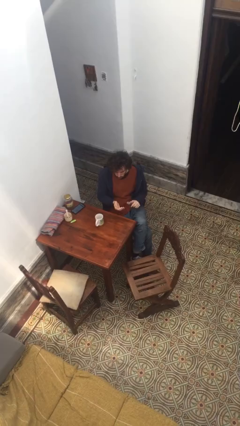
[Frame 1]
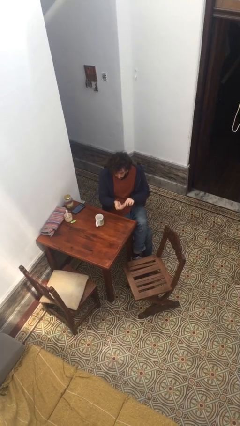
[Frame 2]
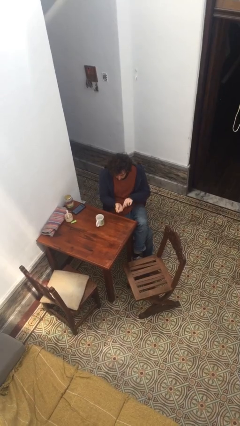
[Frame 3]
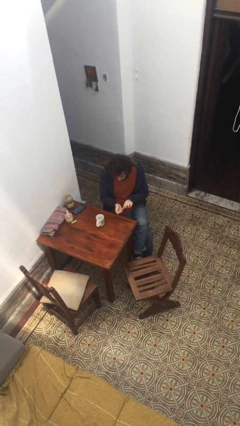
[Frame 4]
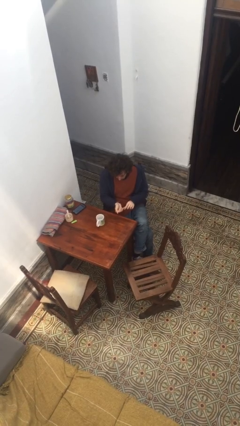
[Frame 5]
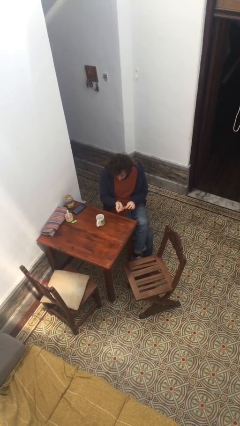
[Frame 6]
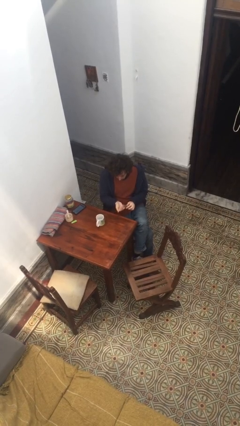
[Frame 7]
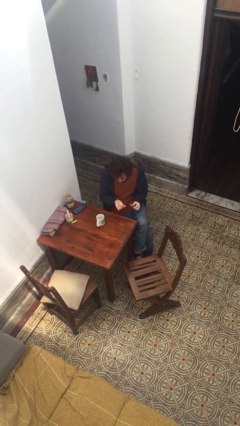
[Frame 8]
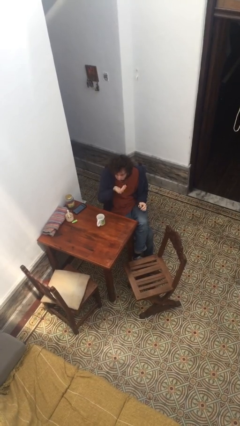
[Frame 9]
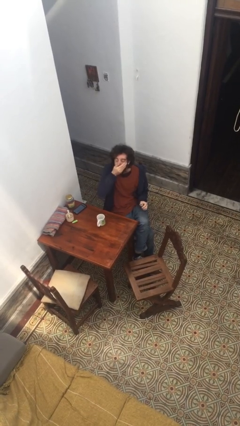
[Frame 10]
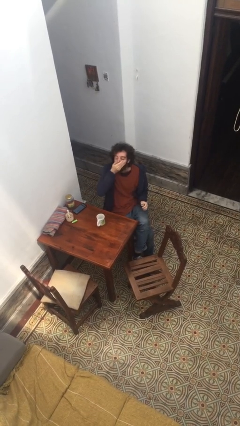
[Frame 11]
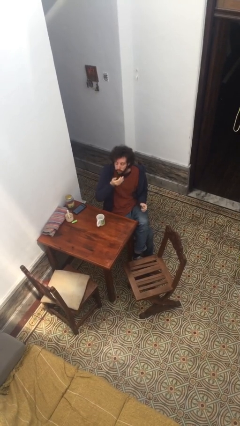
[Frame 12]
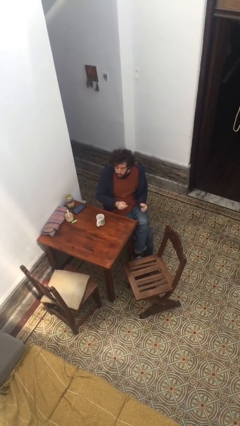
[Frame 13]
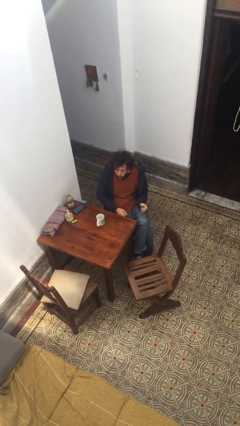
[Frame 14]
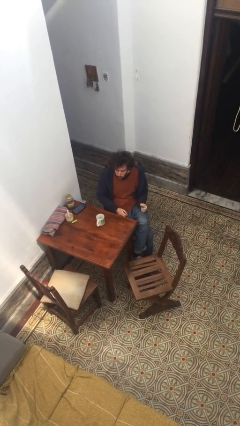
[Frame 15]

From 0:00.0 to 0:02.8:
person takes medicine pills

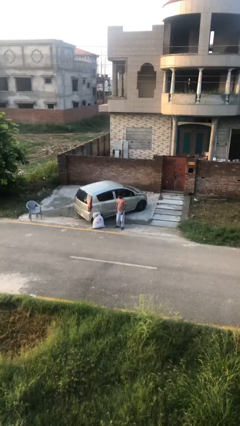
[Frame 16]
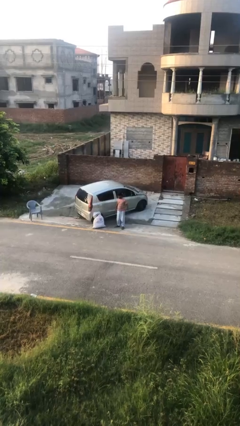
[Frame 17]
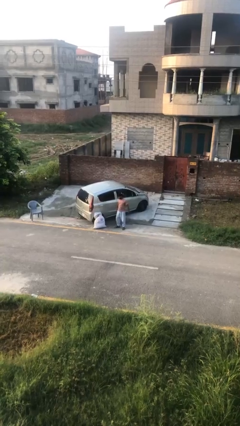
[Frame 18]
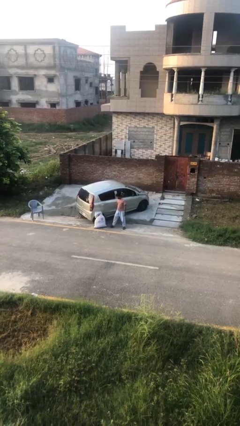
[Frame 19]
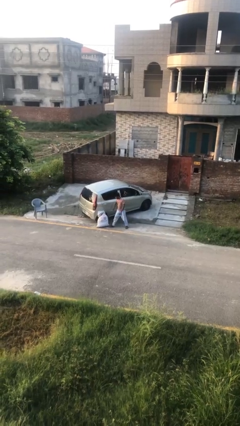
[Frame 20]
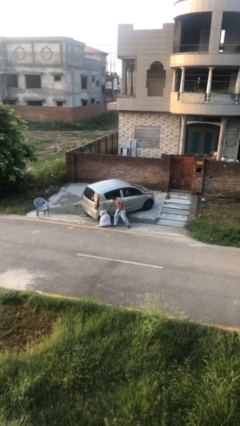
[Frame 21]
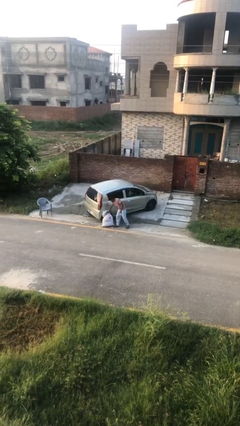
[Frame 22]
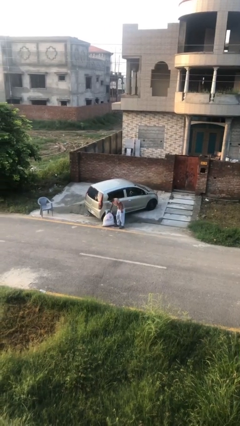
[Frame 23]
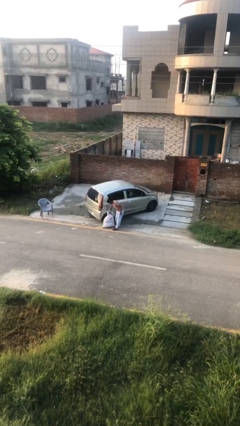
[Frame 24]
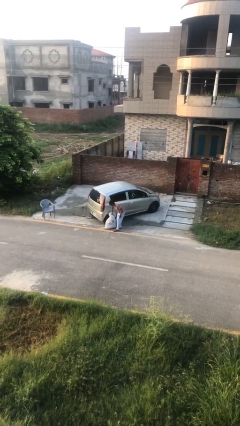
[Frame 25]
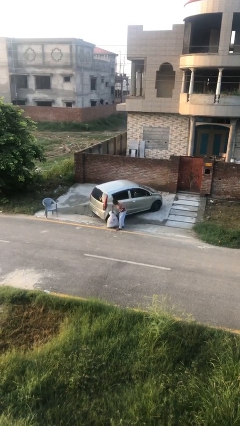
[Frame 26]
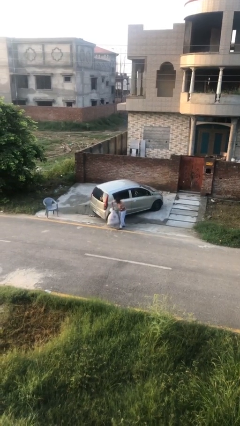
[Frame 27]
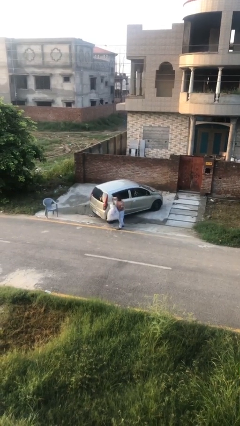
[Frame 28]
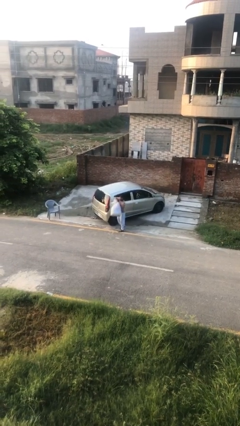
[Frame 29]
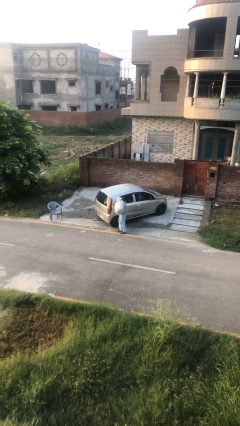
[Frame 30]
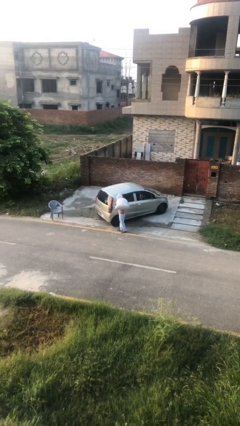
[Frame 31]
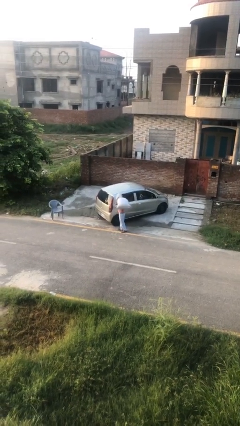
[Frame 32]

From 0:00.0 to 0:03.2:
person picks up object from floor

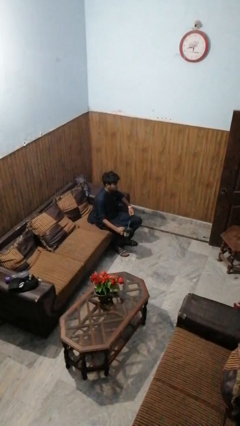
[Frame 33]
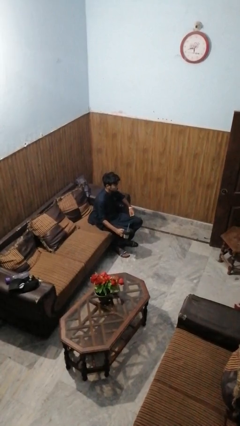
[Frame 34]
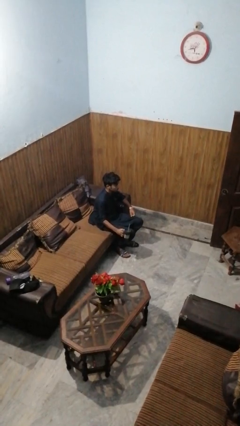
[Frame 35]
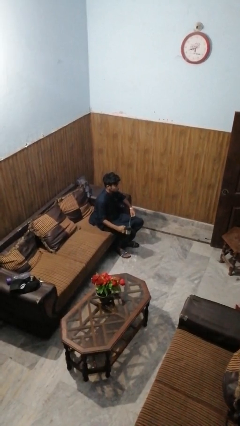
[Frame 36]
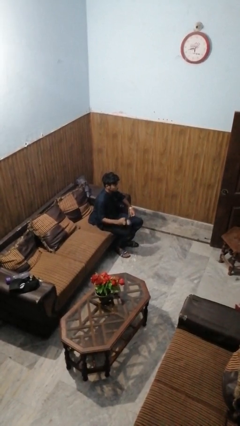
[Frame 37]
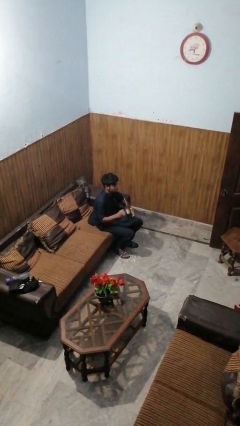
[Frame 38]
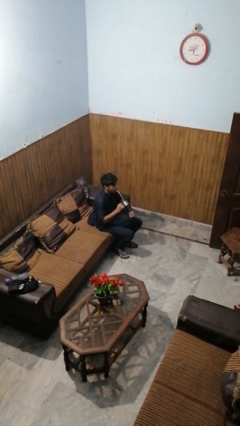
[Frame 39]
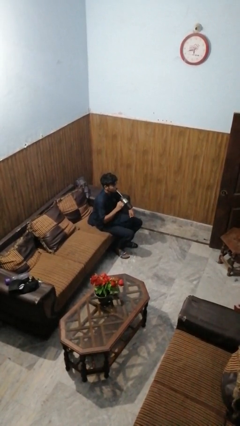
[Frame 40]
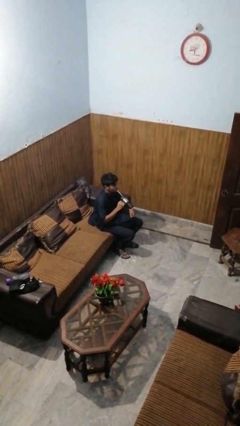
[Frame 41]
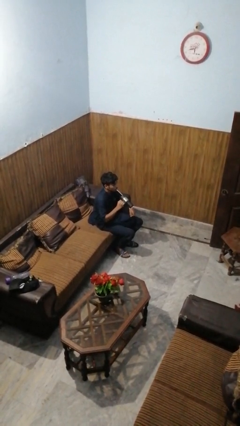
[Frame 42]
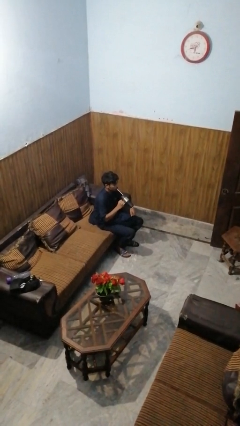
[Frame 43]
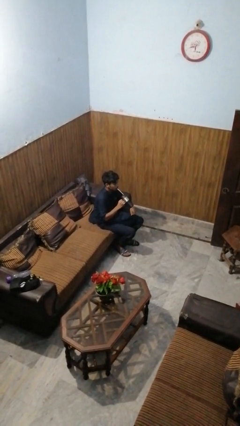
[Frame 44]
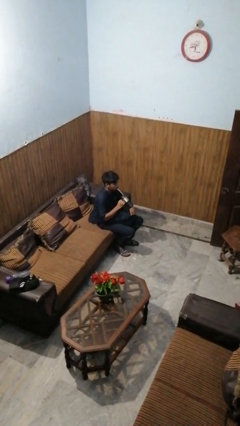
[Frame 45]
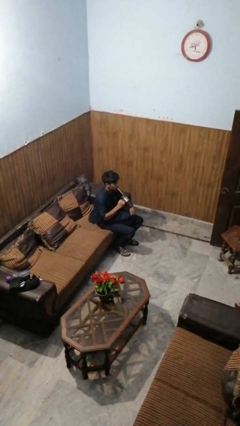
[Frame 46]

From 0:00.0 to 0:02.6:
person drinks from straw

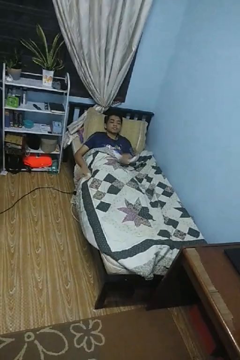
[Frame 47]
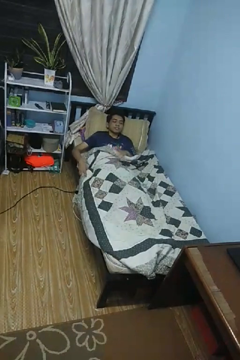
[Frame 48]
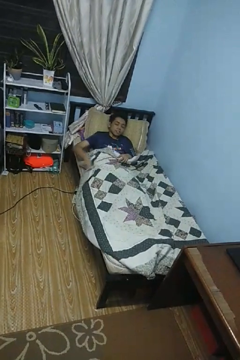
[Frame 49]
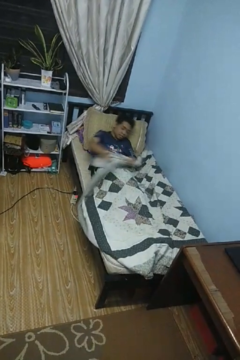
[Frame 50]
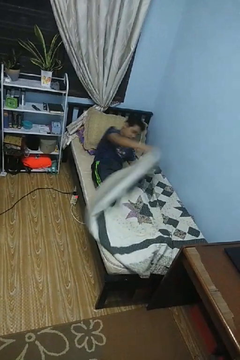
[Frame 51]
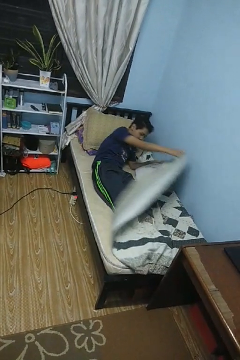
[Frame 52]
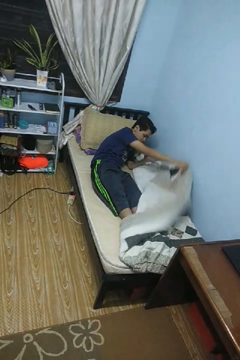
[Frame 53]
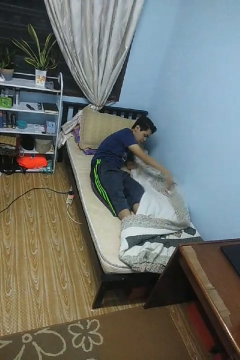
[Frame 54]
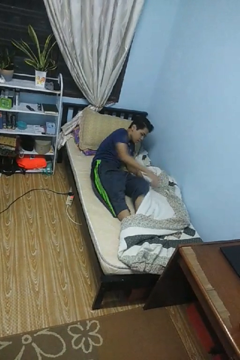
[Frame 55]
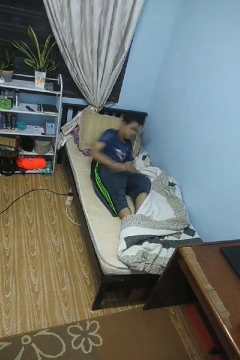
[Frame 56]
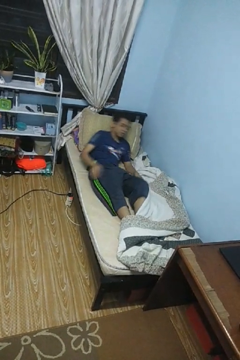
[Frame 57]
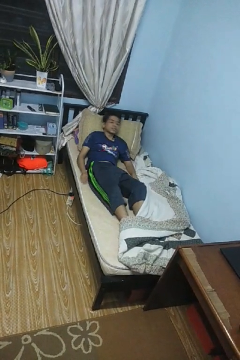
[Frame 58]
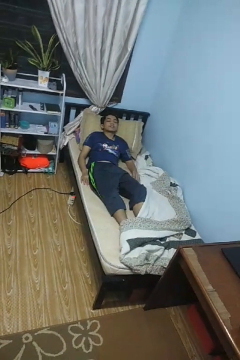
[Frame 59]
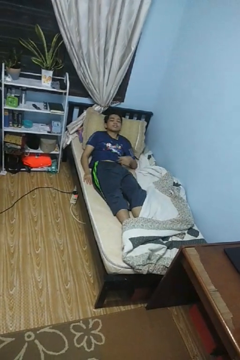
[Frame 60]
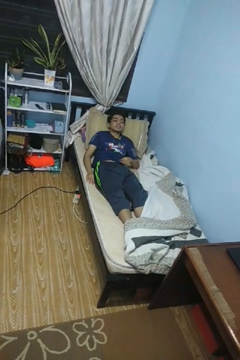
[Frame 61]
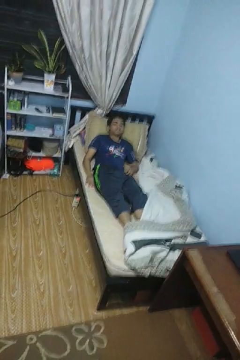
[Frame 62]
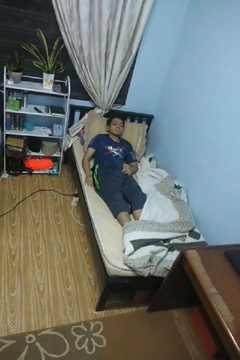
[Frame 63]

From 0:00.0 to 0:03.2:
person uncovers with bedsheets

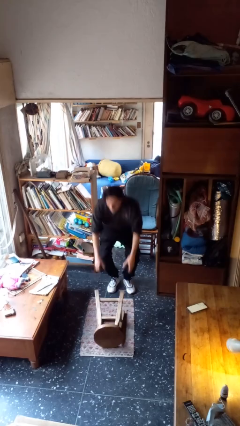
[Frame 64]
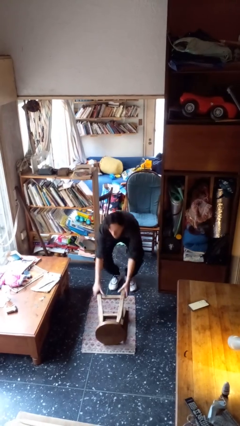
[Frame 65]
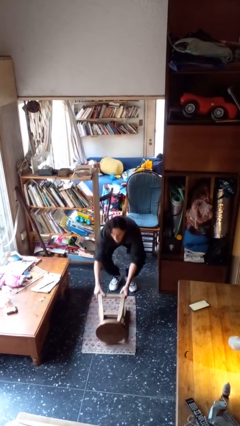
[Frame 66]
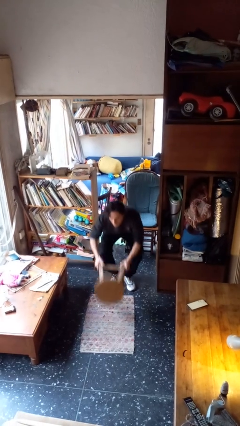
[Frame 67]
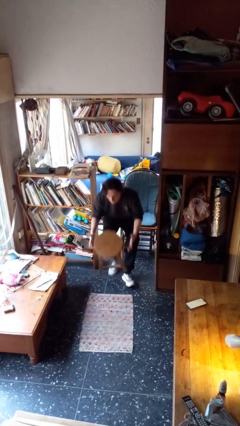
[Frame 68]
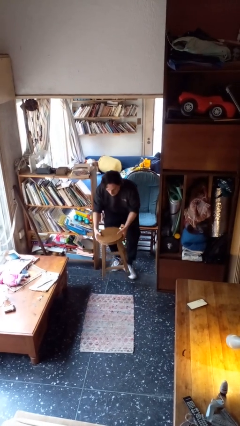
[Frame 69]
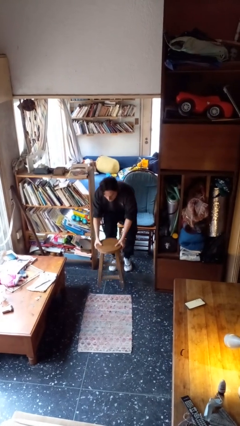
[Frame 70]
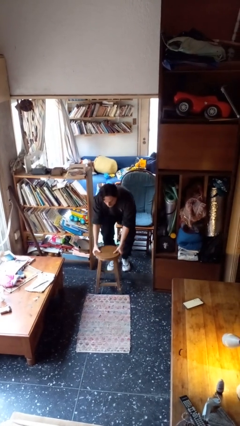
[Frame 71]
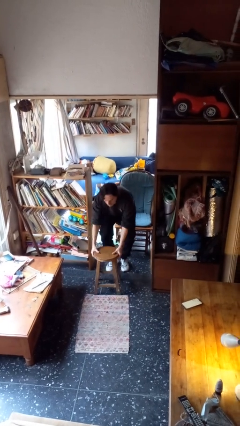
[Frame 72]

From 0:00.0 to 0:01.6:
person sets upright furniture

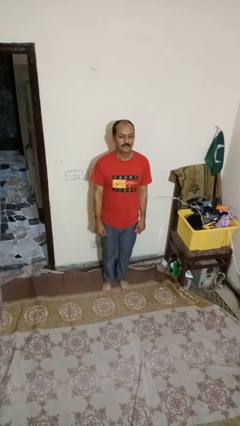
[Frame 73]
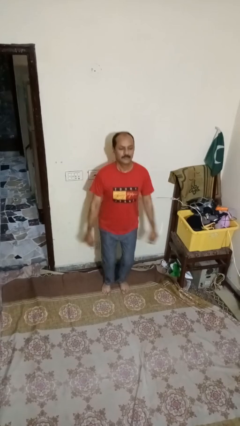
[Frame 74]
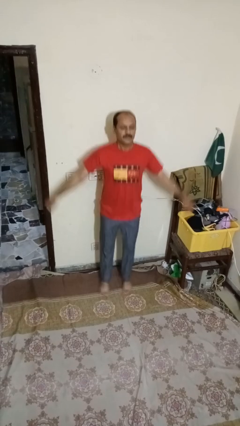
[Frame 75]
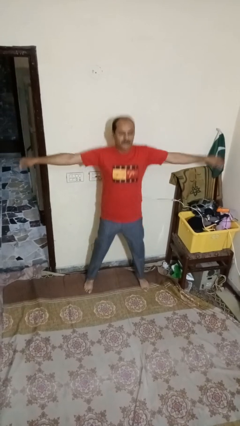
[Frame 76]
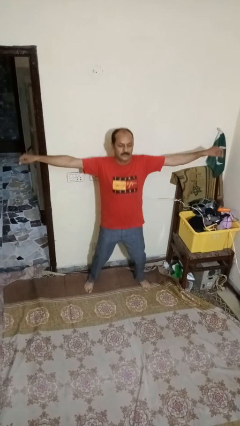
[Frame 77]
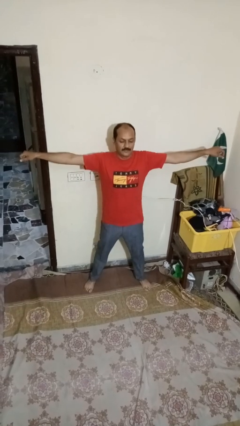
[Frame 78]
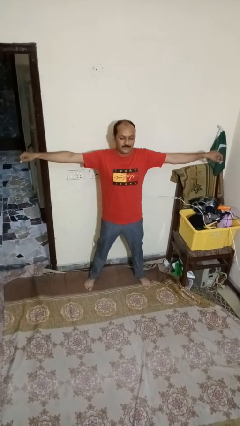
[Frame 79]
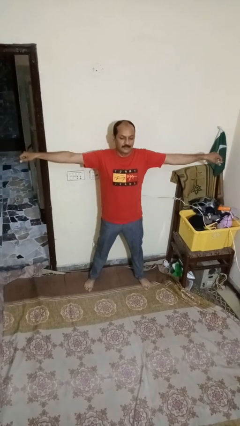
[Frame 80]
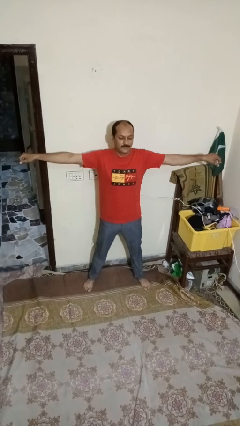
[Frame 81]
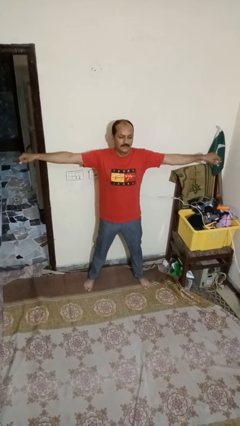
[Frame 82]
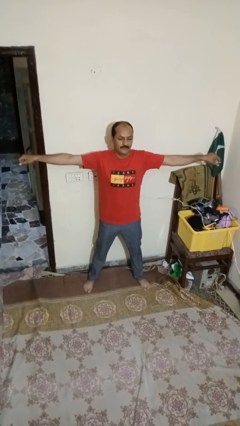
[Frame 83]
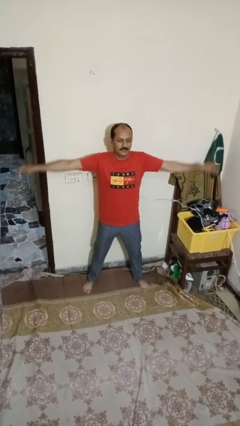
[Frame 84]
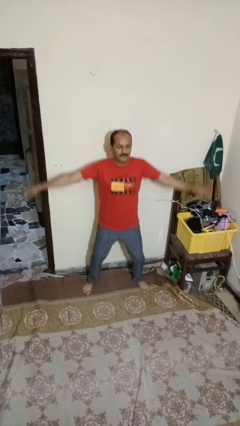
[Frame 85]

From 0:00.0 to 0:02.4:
person exercises with jumping jacks

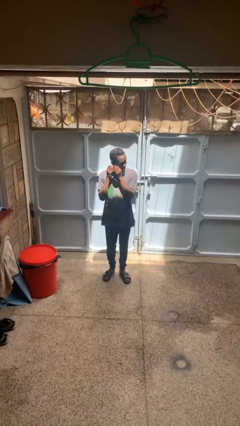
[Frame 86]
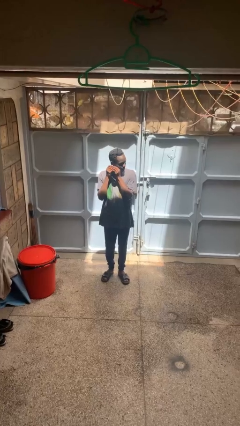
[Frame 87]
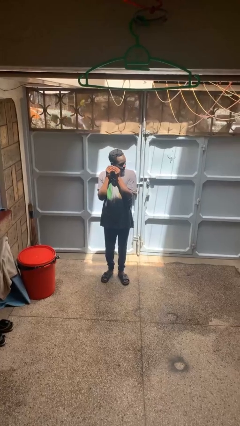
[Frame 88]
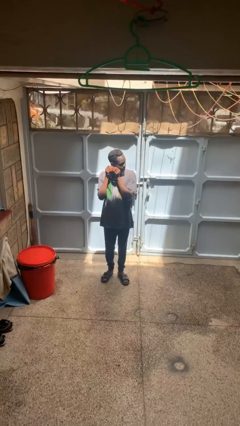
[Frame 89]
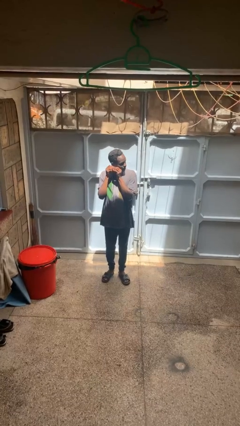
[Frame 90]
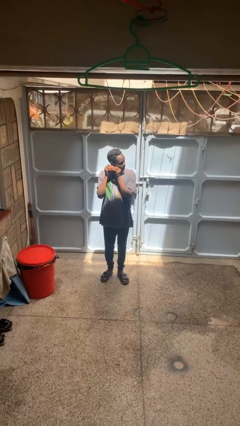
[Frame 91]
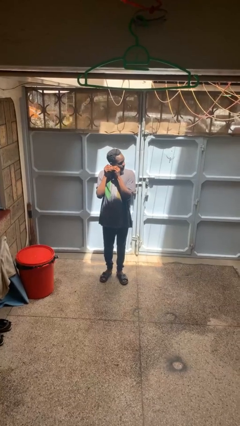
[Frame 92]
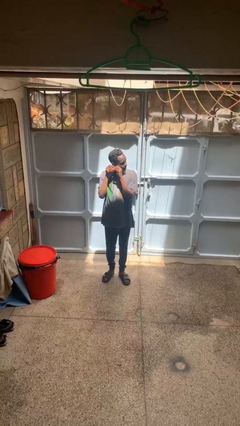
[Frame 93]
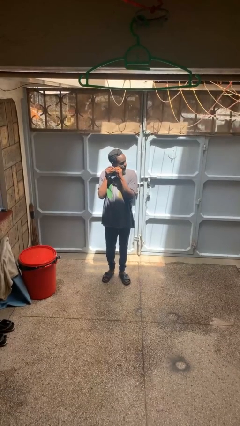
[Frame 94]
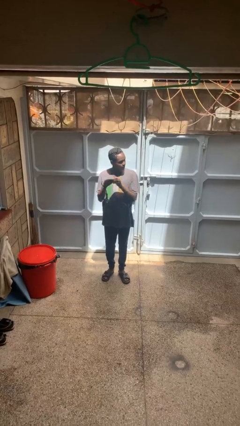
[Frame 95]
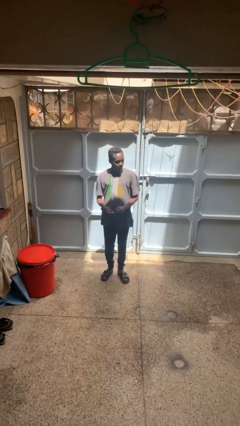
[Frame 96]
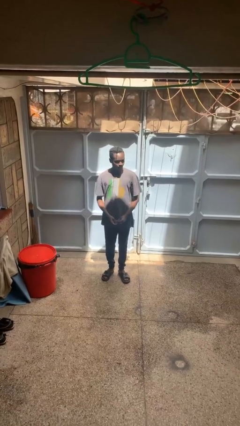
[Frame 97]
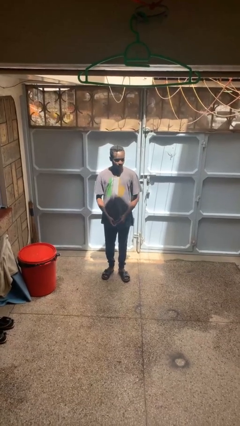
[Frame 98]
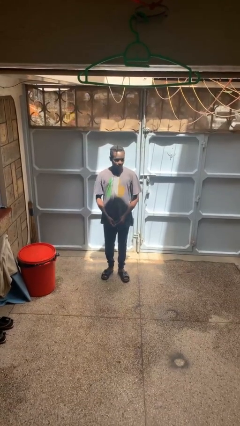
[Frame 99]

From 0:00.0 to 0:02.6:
person takes off earrings
